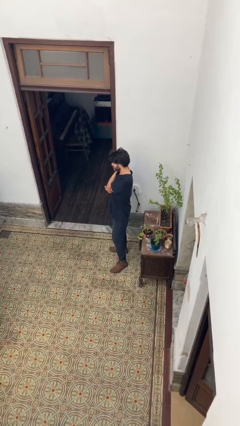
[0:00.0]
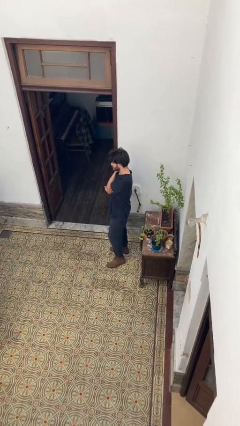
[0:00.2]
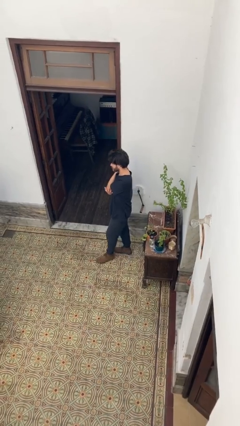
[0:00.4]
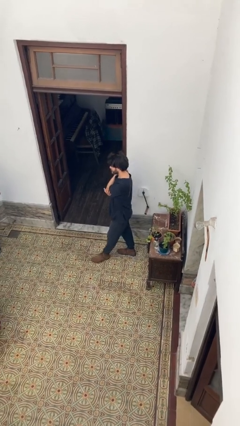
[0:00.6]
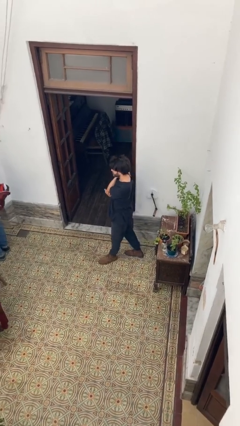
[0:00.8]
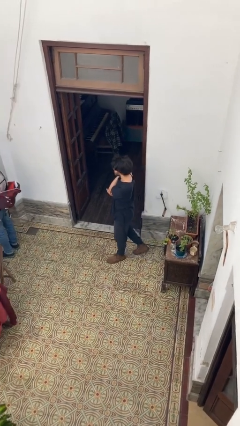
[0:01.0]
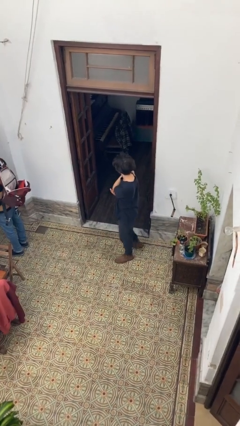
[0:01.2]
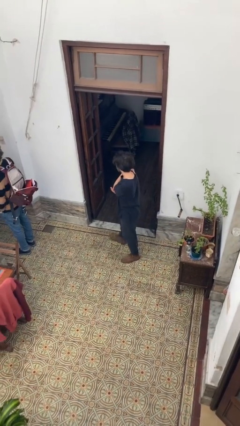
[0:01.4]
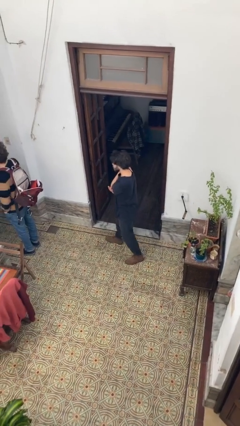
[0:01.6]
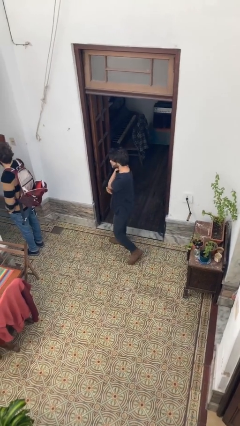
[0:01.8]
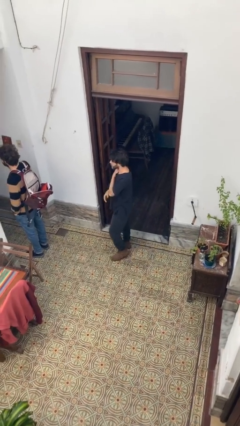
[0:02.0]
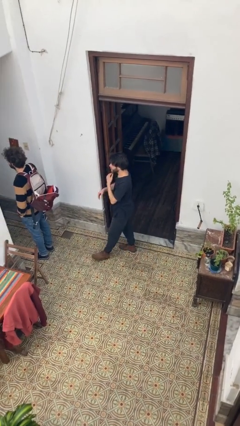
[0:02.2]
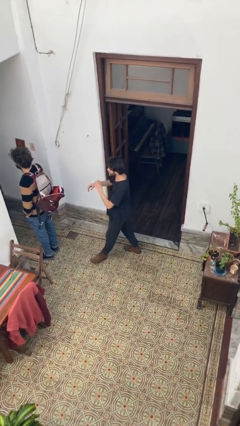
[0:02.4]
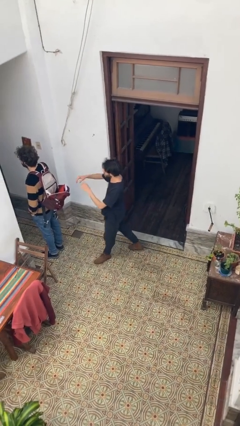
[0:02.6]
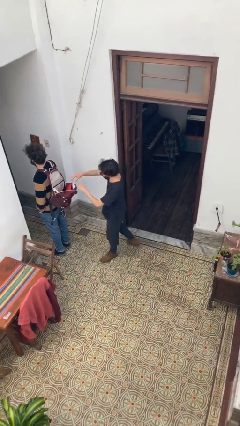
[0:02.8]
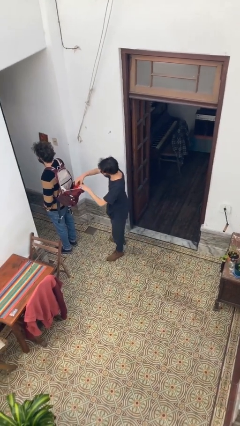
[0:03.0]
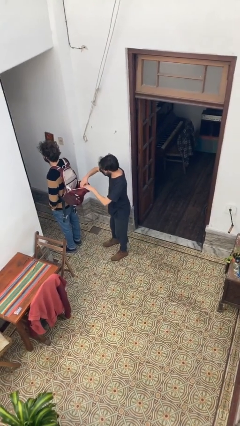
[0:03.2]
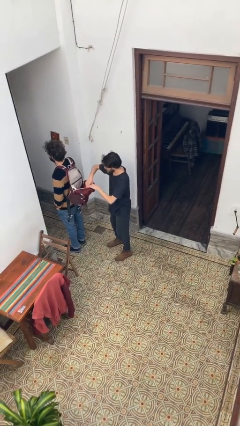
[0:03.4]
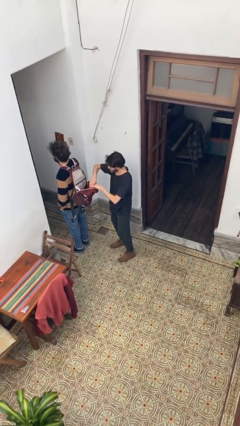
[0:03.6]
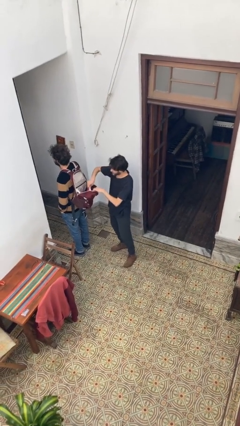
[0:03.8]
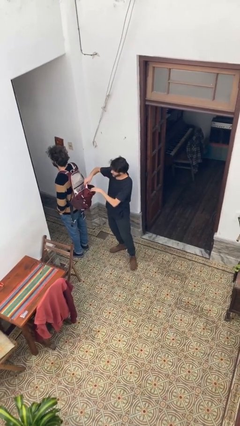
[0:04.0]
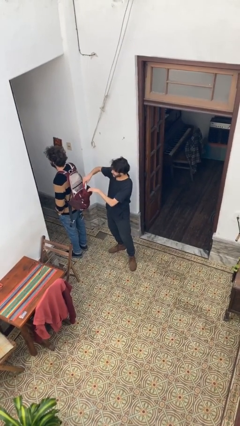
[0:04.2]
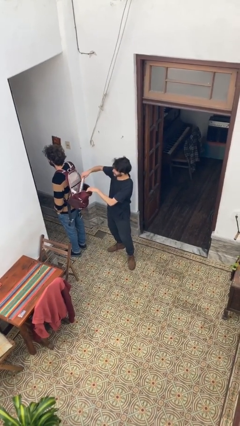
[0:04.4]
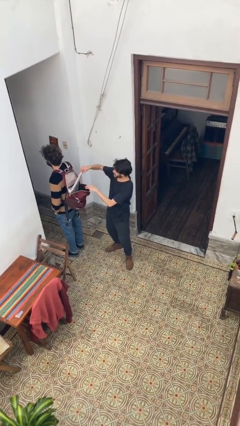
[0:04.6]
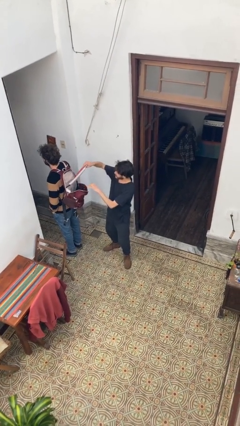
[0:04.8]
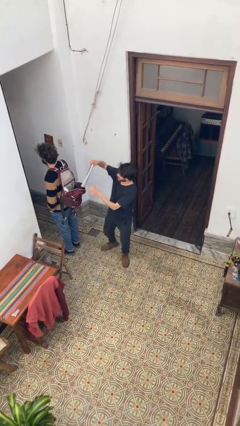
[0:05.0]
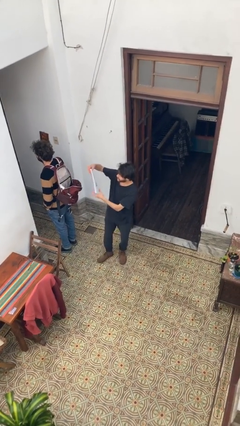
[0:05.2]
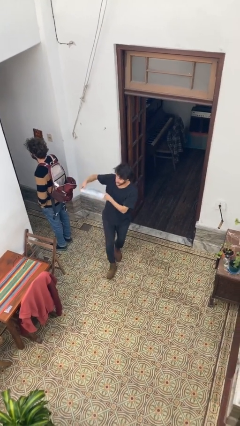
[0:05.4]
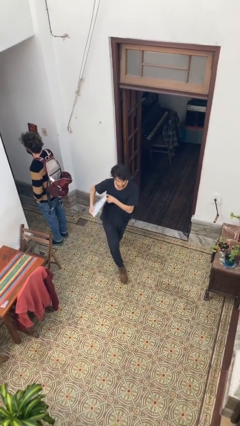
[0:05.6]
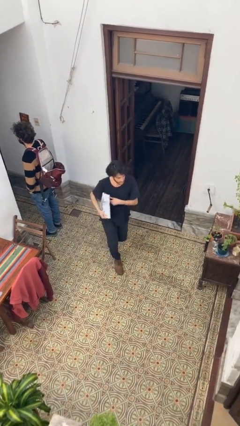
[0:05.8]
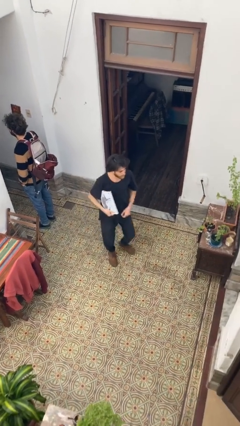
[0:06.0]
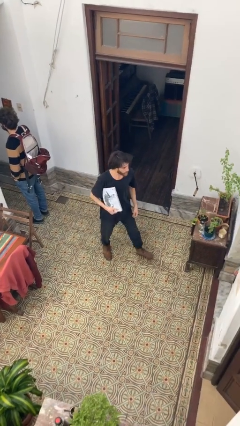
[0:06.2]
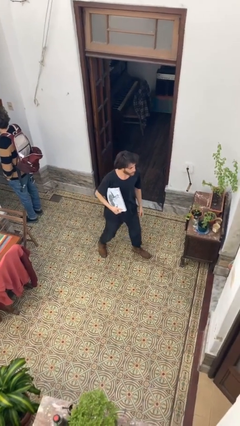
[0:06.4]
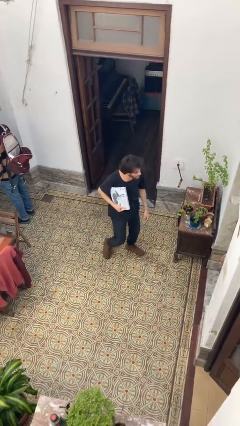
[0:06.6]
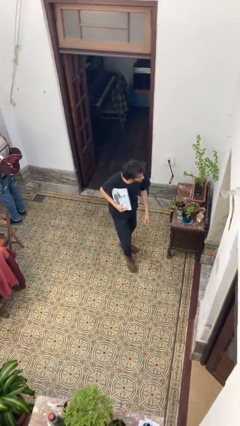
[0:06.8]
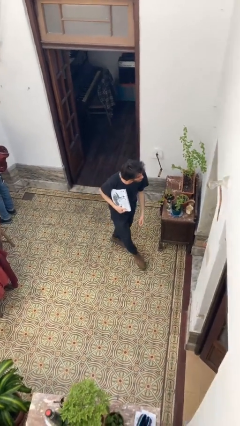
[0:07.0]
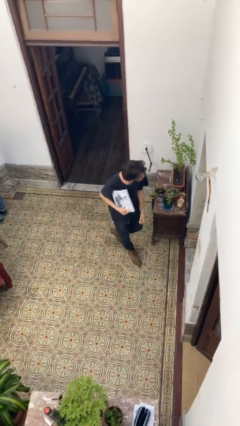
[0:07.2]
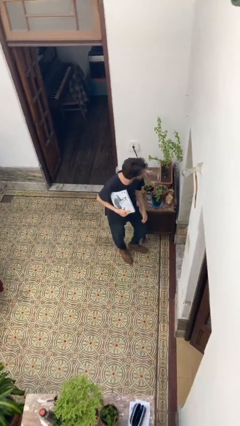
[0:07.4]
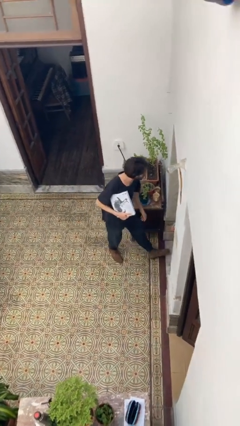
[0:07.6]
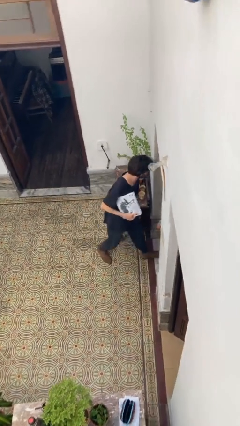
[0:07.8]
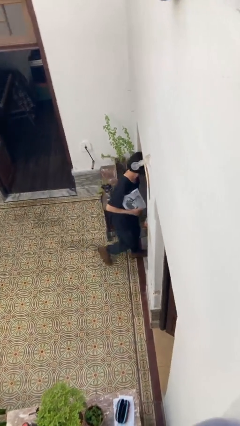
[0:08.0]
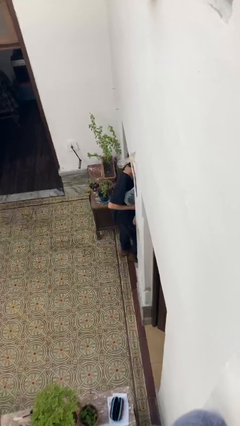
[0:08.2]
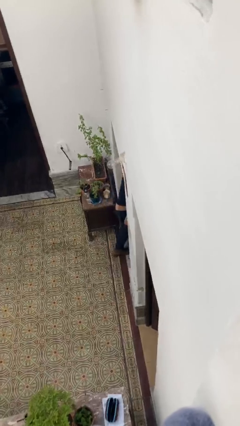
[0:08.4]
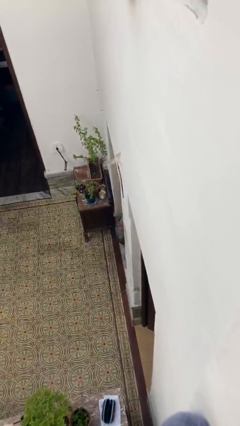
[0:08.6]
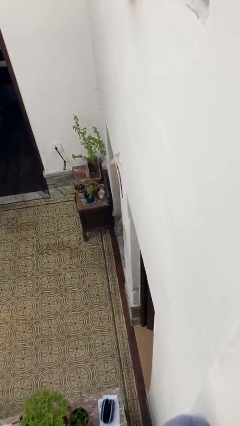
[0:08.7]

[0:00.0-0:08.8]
person steals object from person

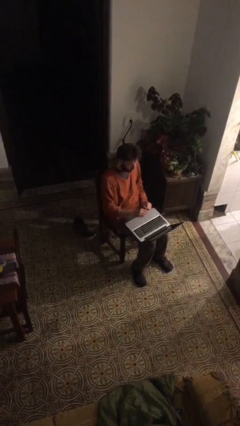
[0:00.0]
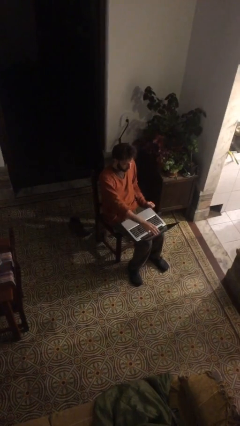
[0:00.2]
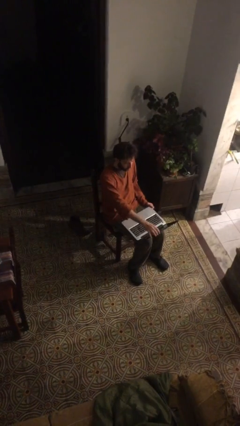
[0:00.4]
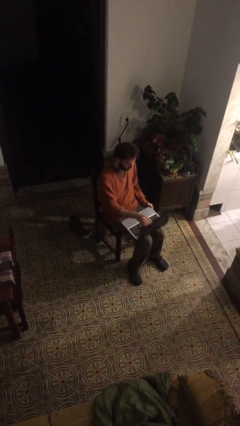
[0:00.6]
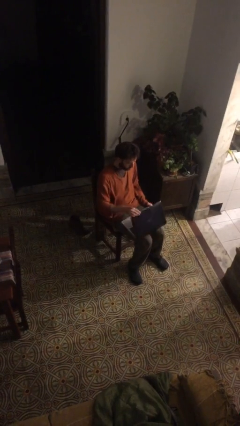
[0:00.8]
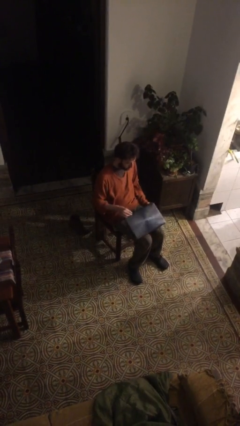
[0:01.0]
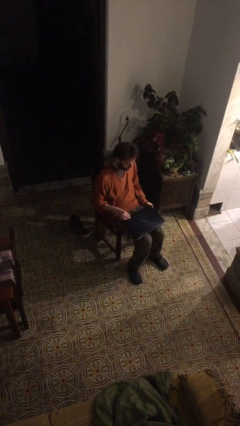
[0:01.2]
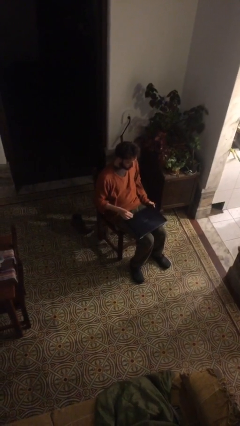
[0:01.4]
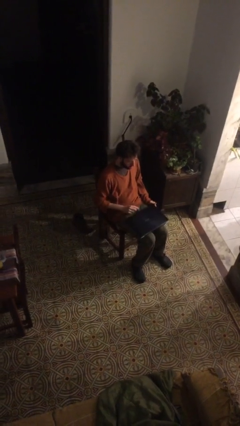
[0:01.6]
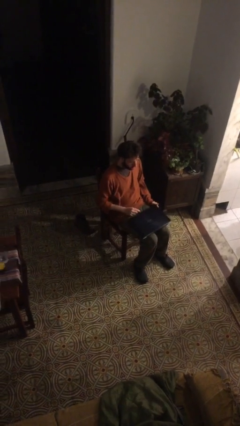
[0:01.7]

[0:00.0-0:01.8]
person closes laptop

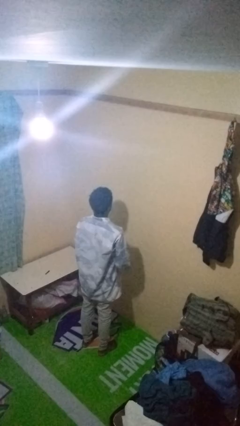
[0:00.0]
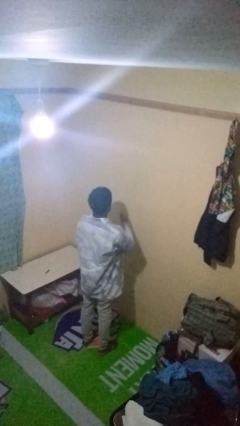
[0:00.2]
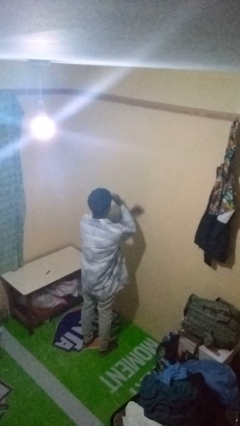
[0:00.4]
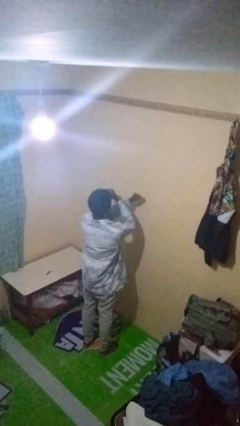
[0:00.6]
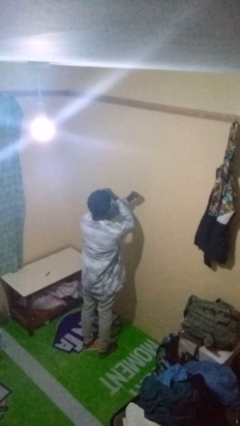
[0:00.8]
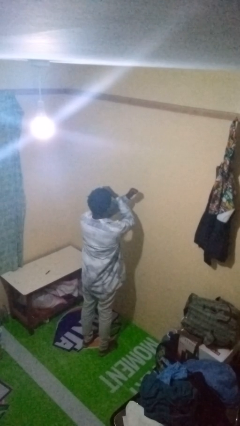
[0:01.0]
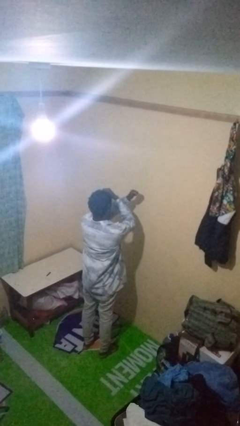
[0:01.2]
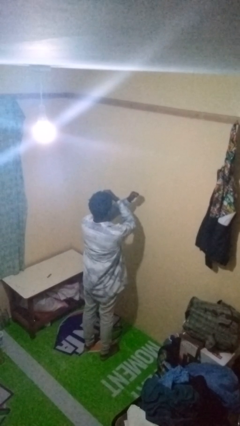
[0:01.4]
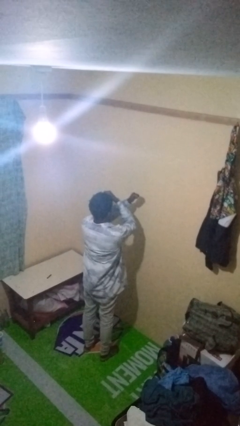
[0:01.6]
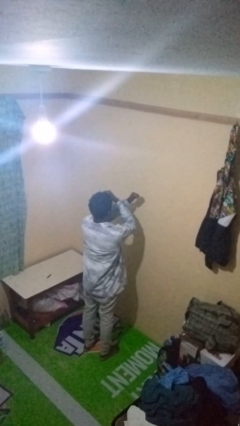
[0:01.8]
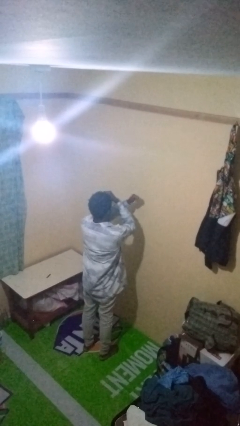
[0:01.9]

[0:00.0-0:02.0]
person gestures arms x

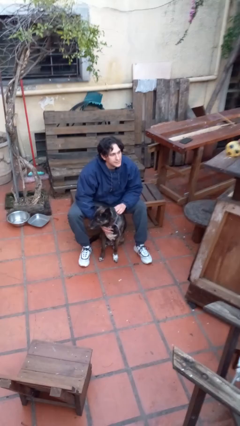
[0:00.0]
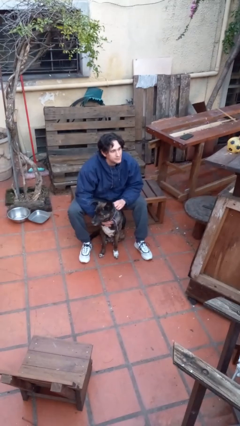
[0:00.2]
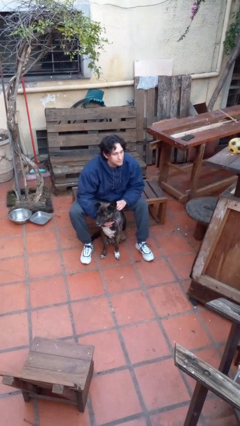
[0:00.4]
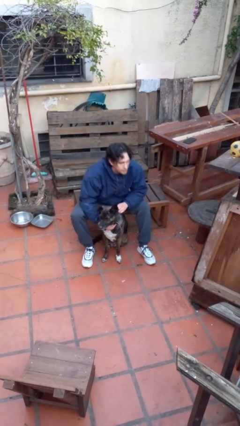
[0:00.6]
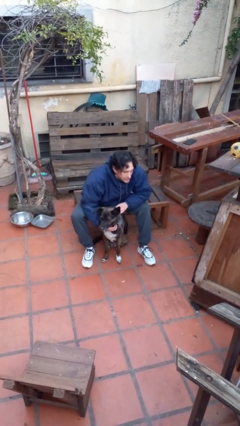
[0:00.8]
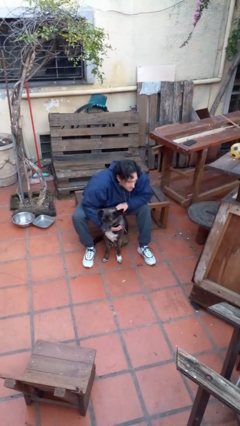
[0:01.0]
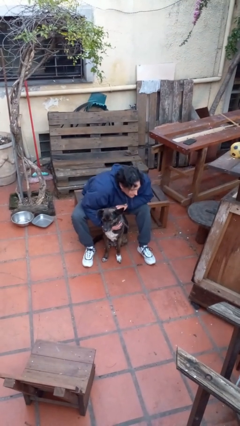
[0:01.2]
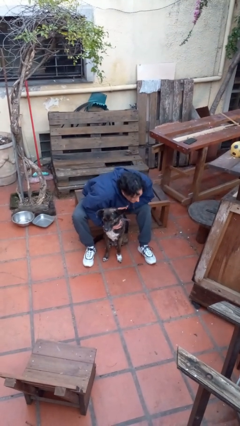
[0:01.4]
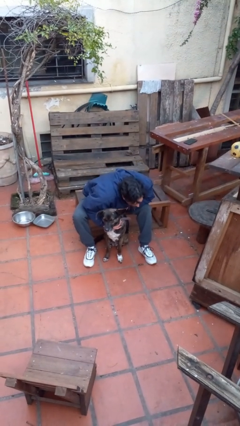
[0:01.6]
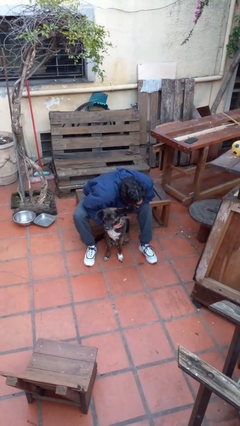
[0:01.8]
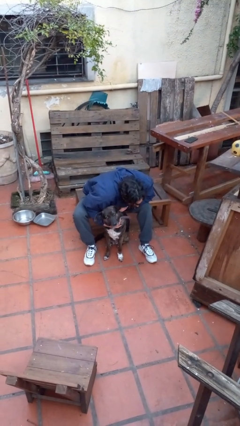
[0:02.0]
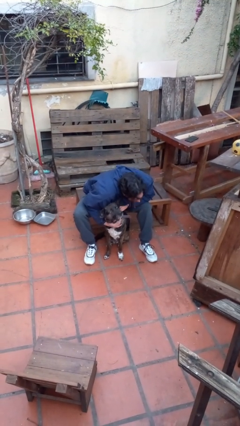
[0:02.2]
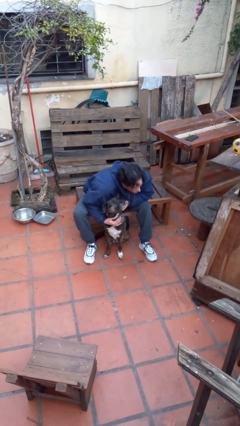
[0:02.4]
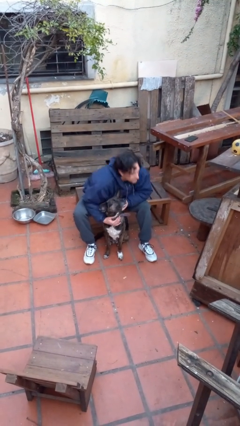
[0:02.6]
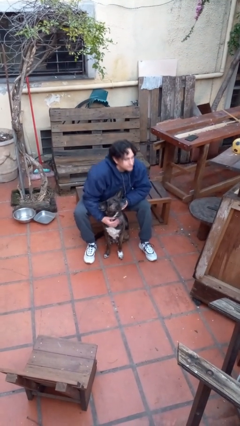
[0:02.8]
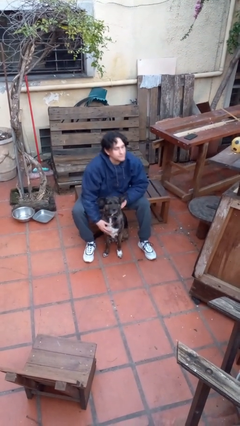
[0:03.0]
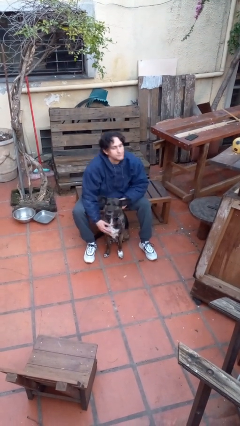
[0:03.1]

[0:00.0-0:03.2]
person hugs dog

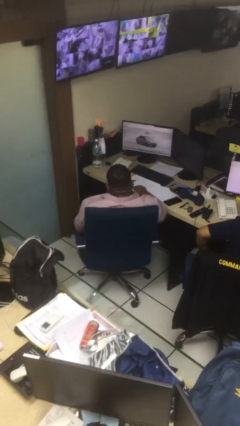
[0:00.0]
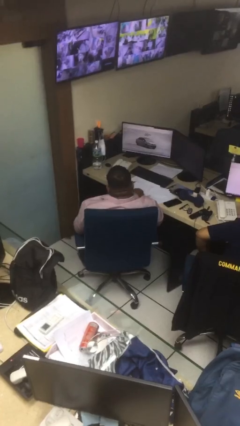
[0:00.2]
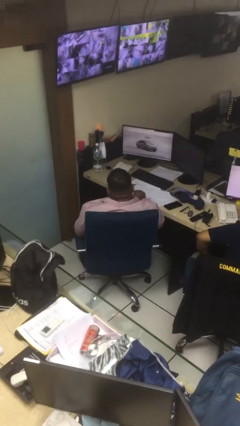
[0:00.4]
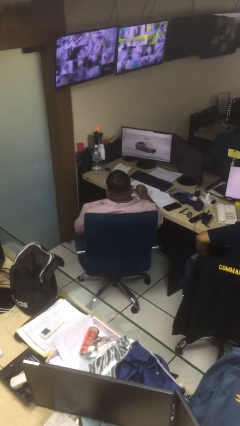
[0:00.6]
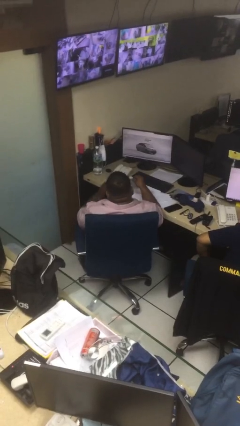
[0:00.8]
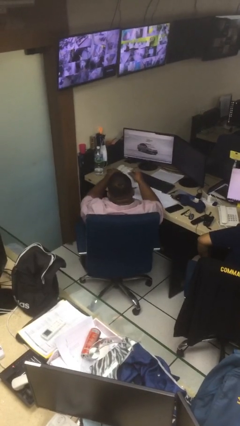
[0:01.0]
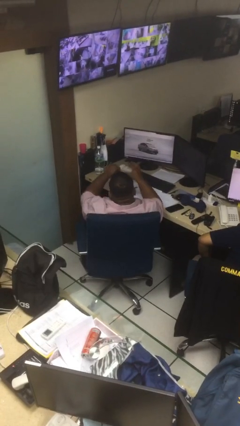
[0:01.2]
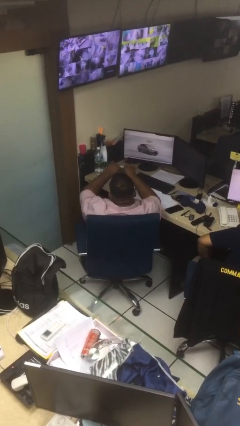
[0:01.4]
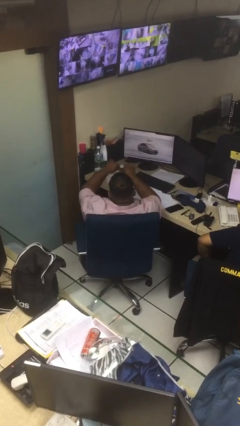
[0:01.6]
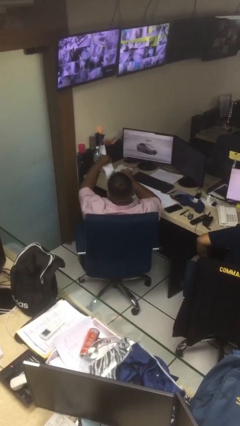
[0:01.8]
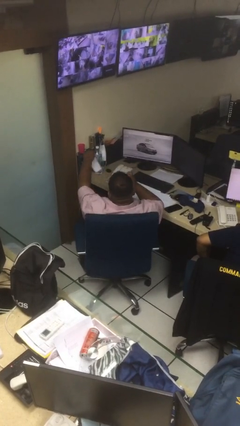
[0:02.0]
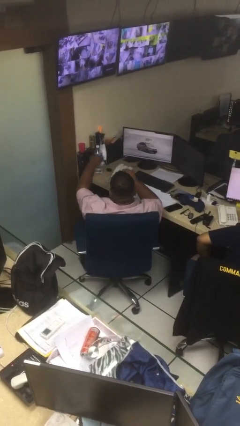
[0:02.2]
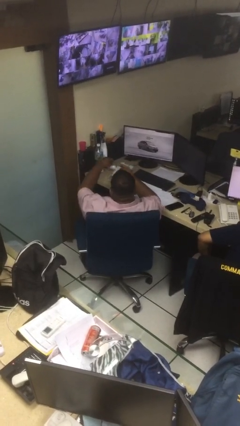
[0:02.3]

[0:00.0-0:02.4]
person tears paper
